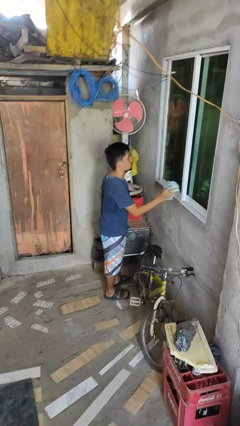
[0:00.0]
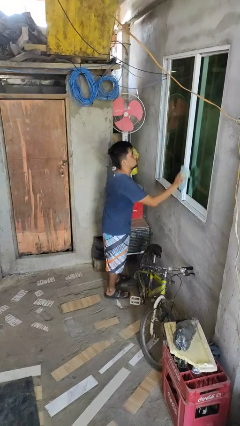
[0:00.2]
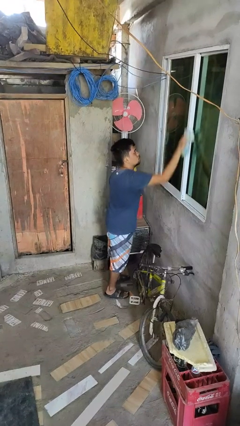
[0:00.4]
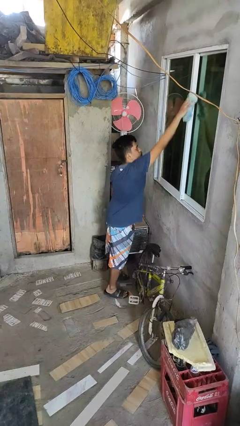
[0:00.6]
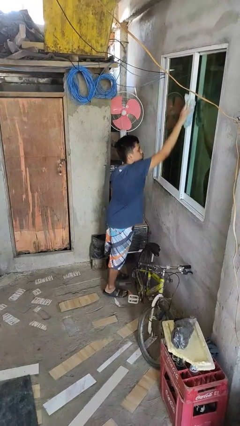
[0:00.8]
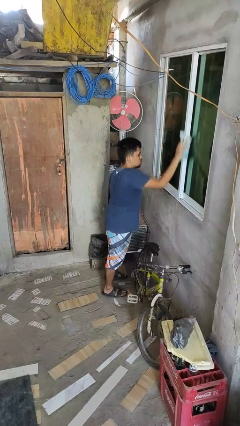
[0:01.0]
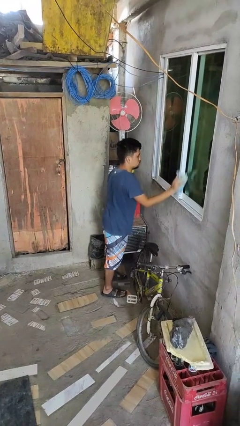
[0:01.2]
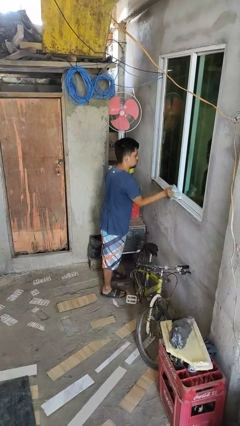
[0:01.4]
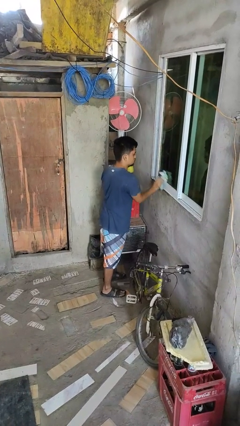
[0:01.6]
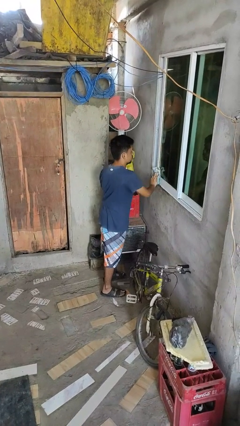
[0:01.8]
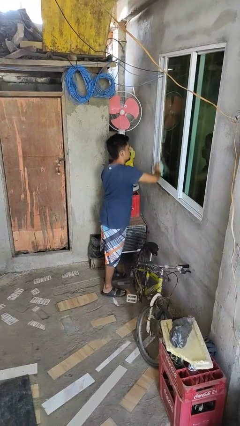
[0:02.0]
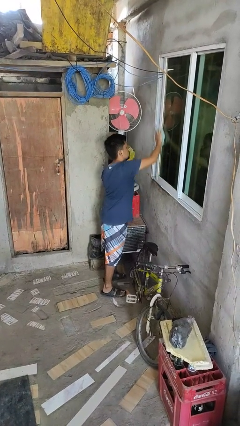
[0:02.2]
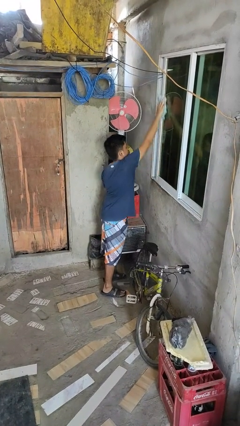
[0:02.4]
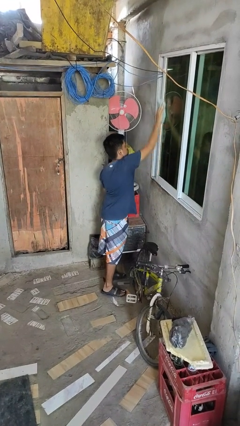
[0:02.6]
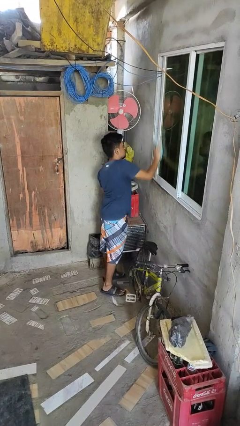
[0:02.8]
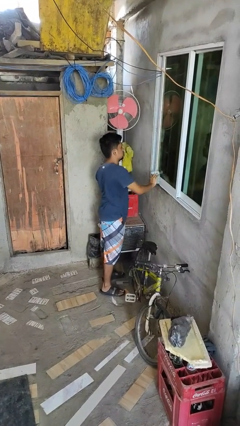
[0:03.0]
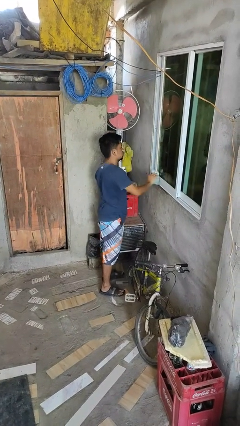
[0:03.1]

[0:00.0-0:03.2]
person washes window

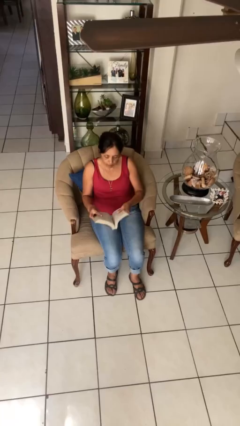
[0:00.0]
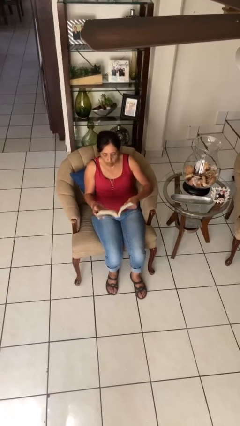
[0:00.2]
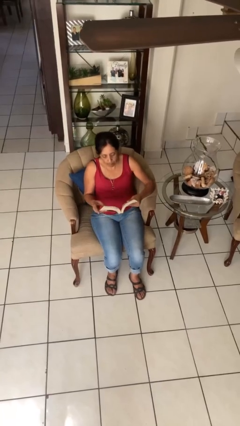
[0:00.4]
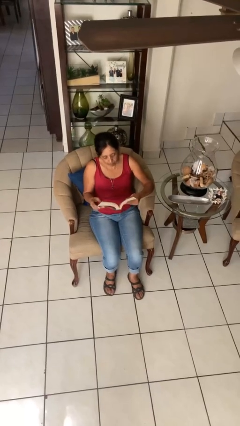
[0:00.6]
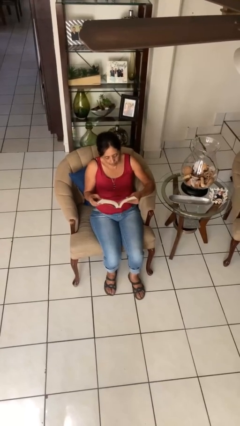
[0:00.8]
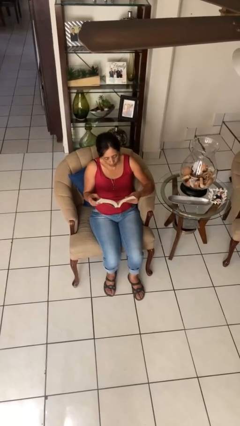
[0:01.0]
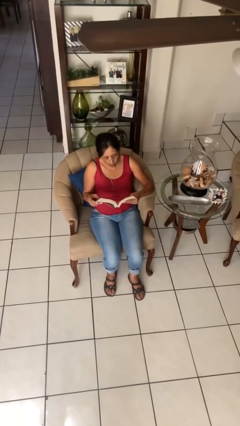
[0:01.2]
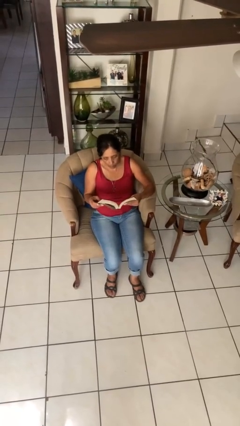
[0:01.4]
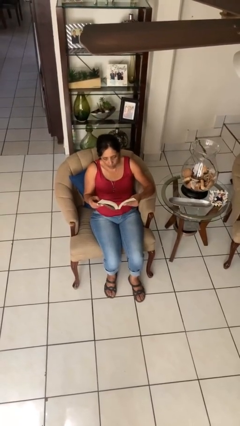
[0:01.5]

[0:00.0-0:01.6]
person reads book

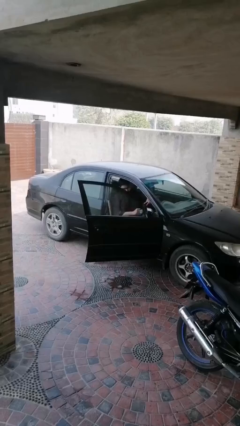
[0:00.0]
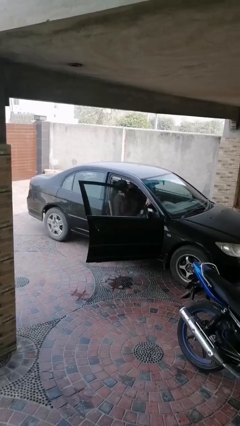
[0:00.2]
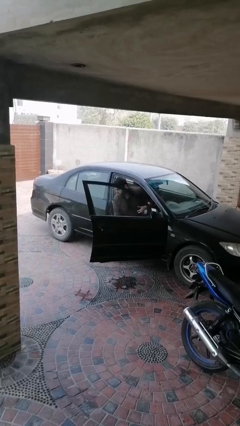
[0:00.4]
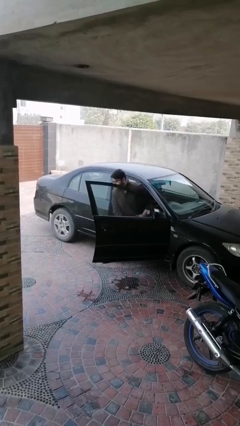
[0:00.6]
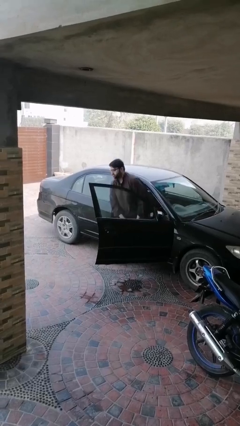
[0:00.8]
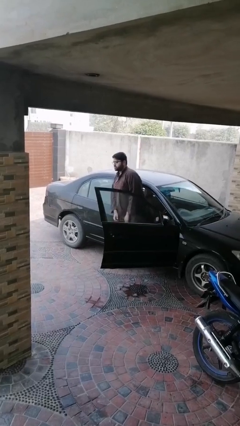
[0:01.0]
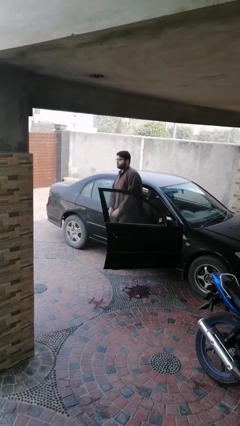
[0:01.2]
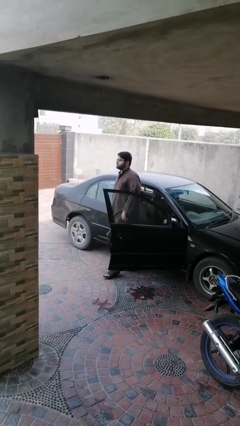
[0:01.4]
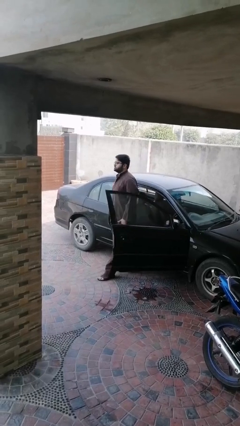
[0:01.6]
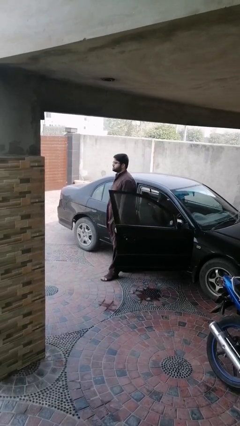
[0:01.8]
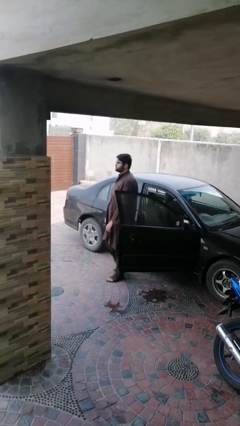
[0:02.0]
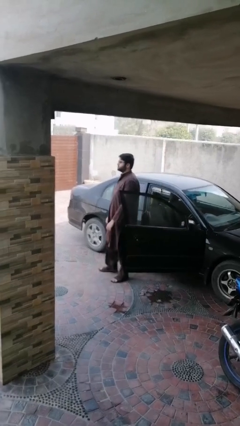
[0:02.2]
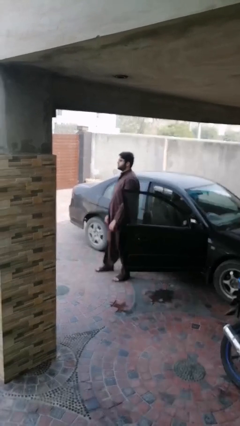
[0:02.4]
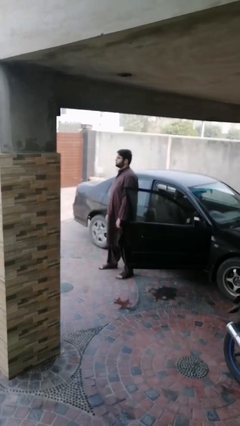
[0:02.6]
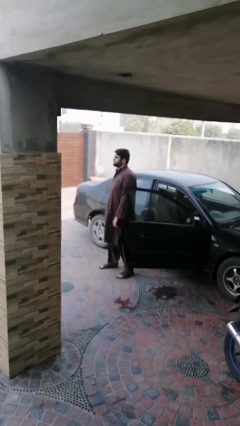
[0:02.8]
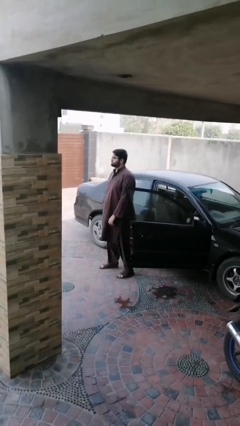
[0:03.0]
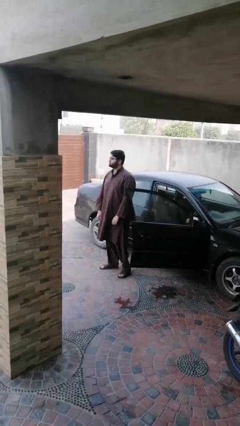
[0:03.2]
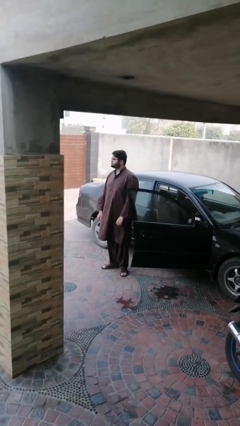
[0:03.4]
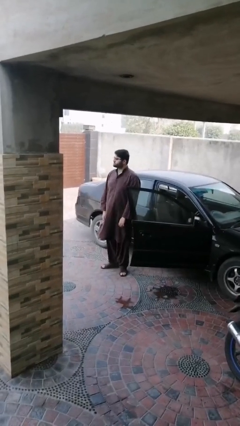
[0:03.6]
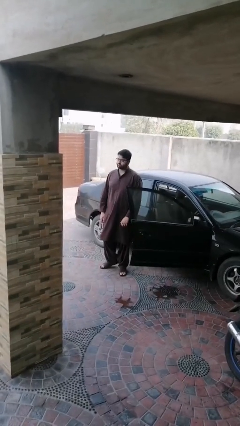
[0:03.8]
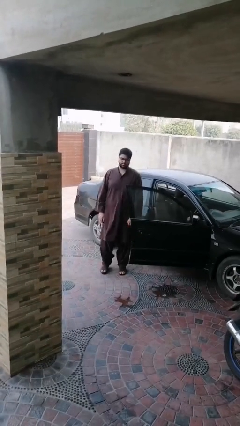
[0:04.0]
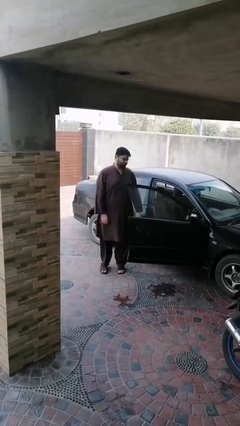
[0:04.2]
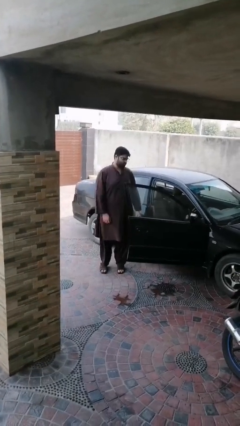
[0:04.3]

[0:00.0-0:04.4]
person exits car

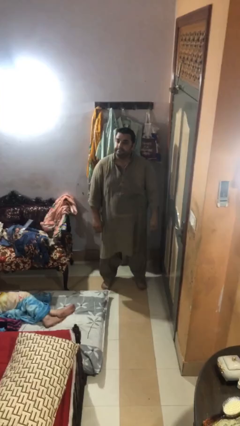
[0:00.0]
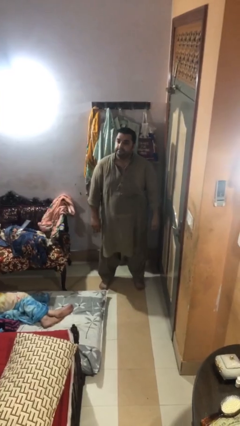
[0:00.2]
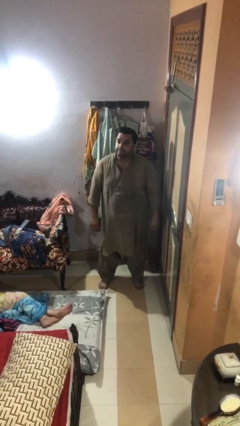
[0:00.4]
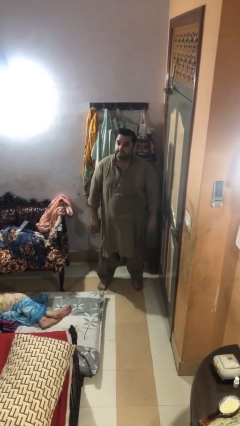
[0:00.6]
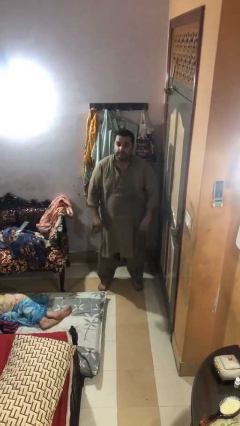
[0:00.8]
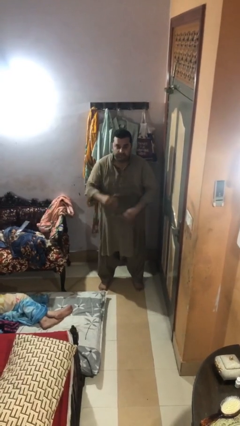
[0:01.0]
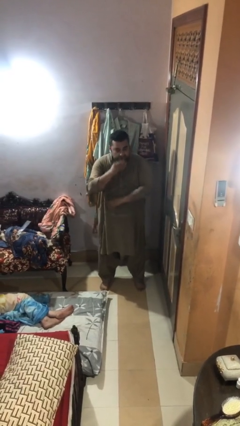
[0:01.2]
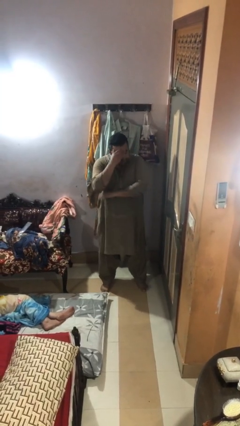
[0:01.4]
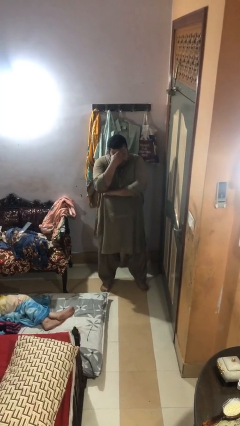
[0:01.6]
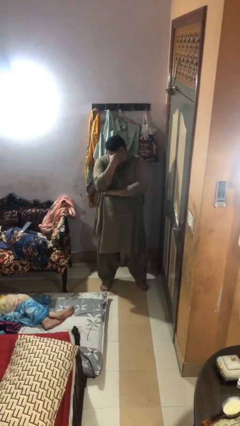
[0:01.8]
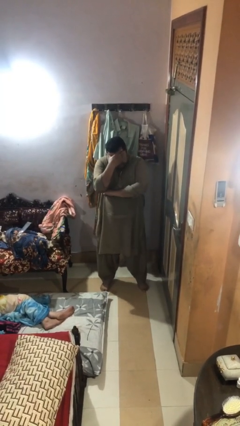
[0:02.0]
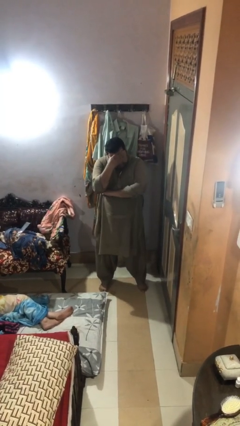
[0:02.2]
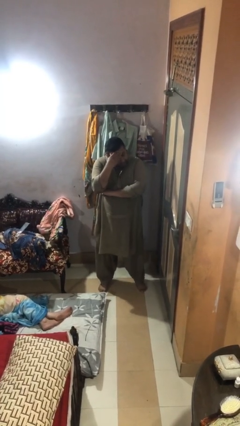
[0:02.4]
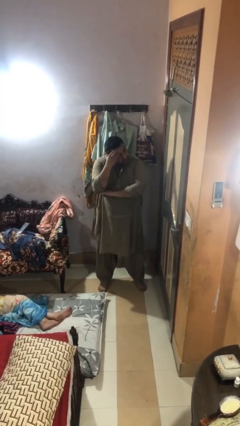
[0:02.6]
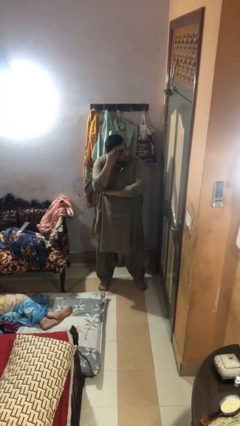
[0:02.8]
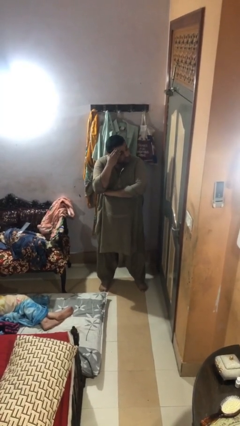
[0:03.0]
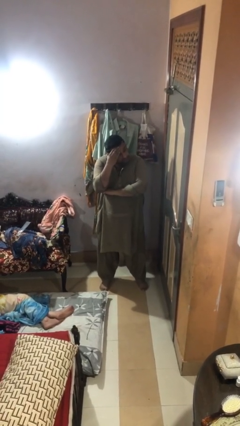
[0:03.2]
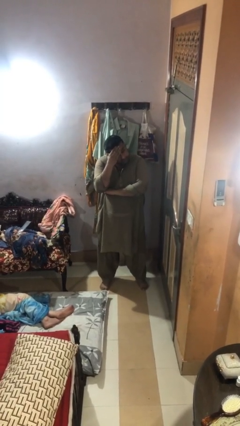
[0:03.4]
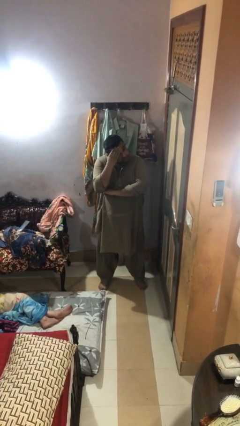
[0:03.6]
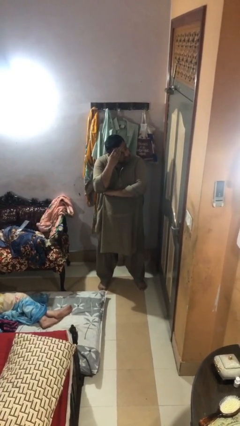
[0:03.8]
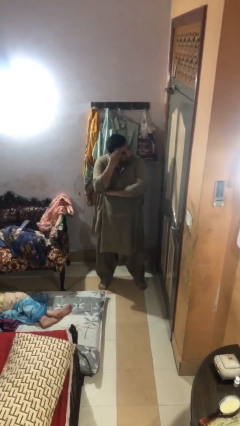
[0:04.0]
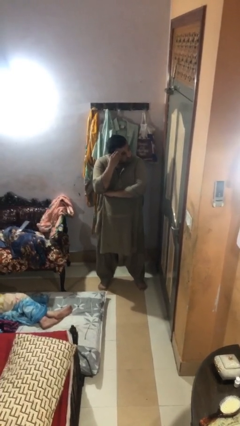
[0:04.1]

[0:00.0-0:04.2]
person scratches face

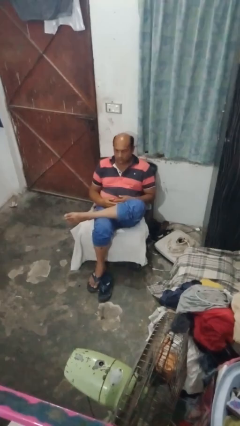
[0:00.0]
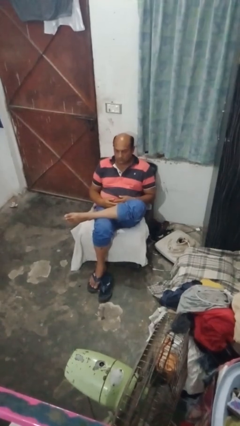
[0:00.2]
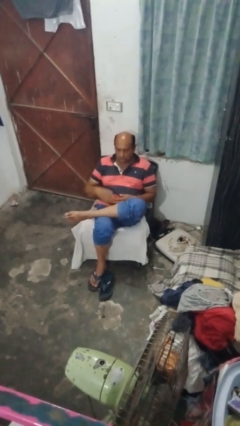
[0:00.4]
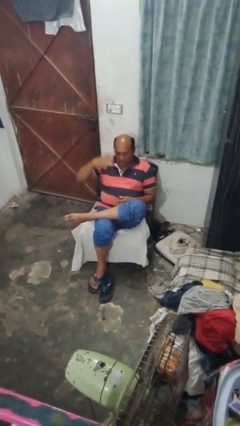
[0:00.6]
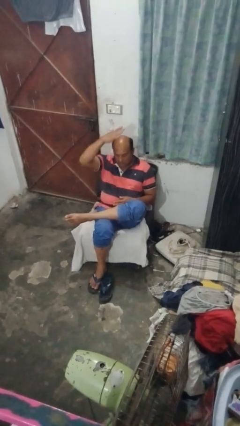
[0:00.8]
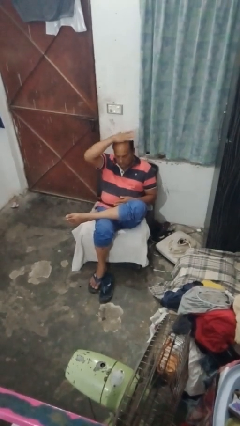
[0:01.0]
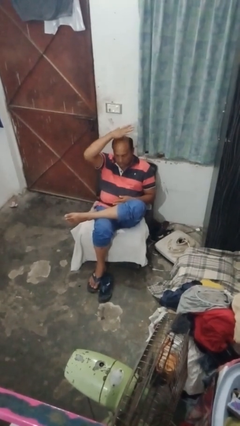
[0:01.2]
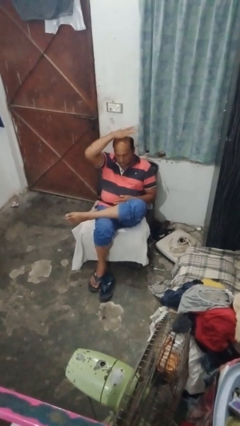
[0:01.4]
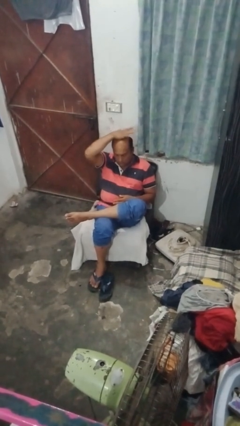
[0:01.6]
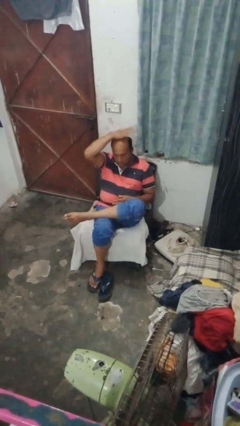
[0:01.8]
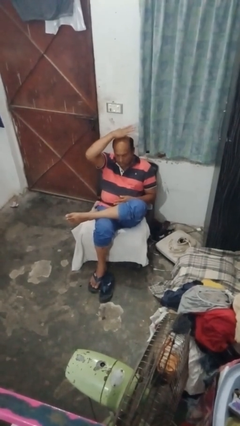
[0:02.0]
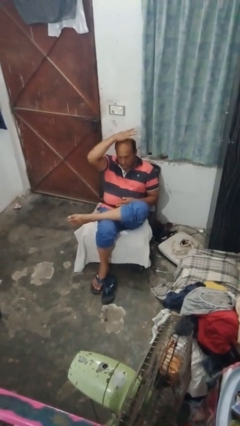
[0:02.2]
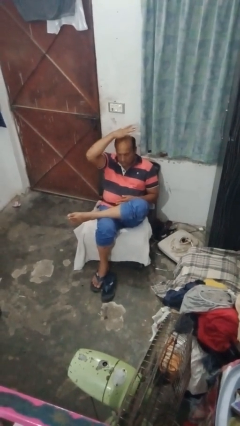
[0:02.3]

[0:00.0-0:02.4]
person pats head

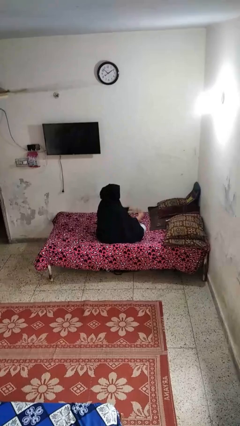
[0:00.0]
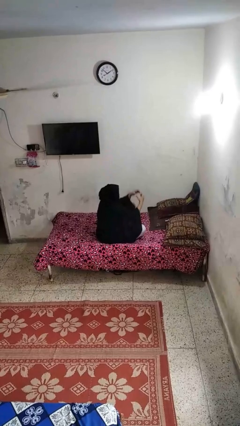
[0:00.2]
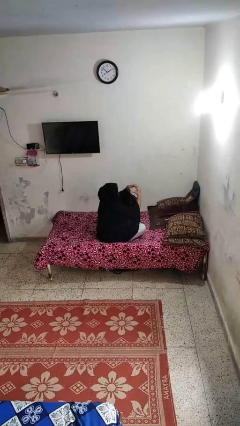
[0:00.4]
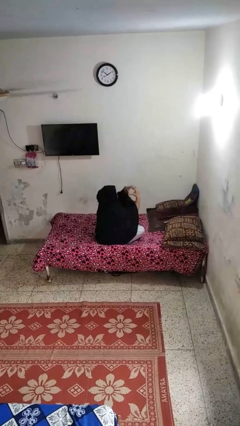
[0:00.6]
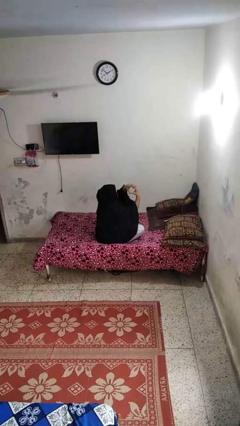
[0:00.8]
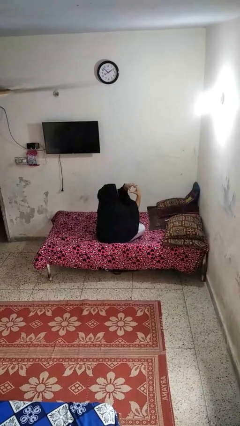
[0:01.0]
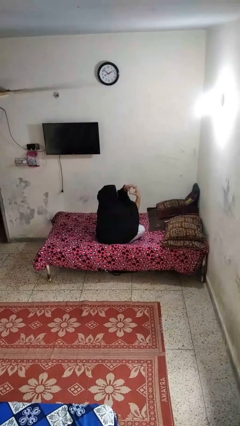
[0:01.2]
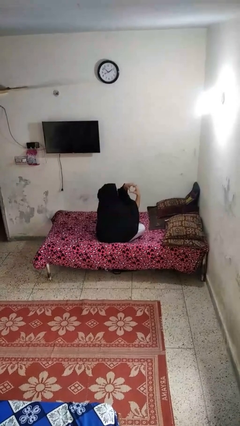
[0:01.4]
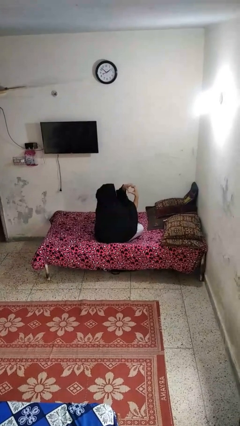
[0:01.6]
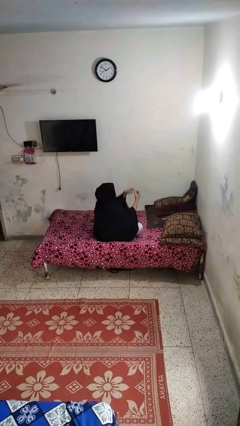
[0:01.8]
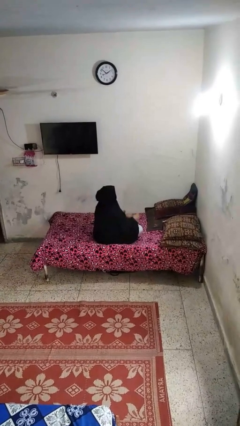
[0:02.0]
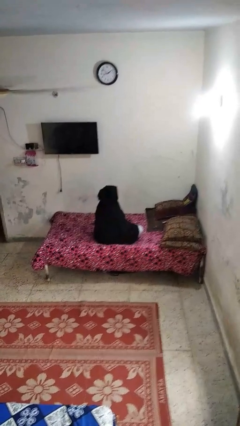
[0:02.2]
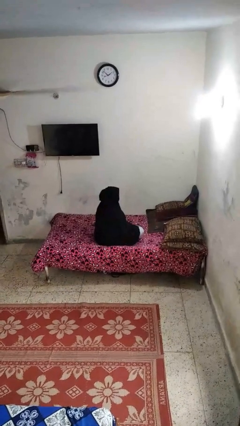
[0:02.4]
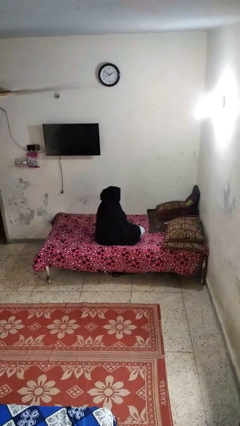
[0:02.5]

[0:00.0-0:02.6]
person gestures heart
